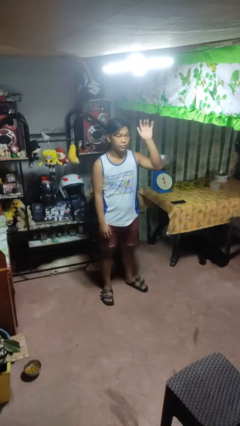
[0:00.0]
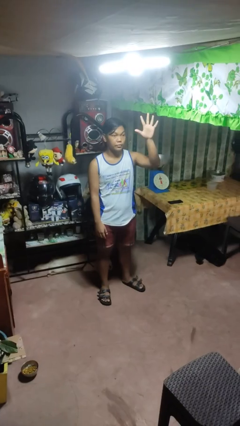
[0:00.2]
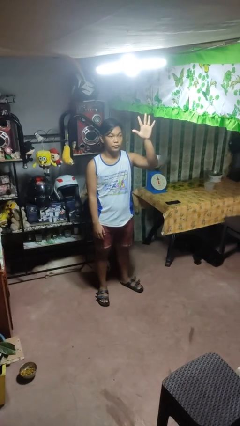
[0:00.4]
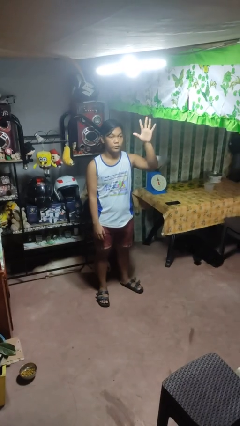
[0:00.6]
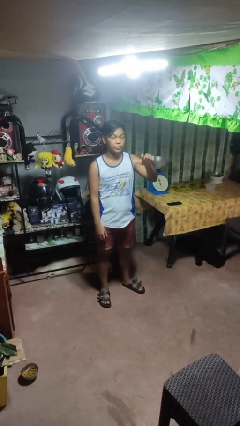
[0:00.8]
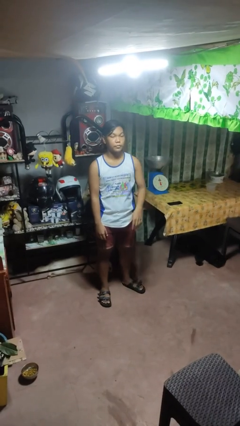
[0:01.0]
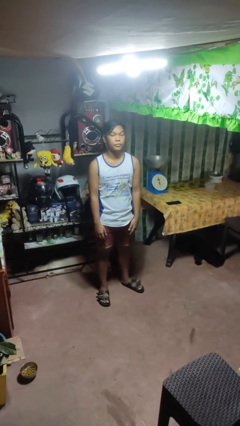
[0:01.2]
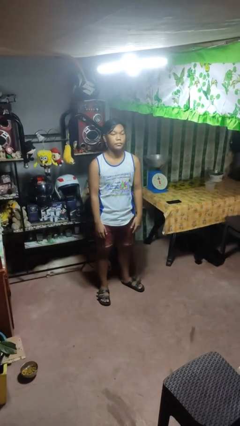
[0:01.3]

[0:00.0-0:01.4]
person gestures number five

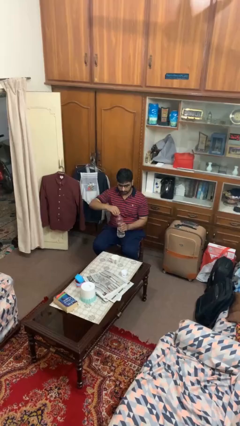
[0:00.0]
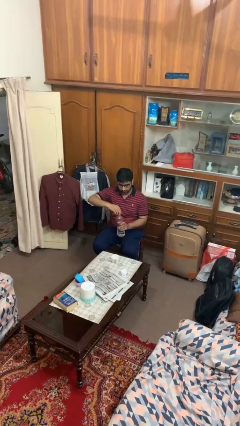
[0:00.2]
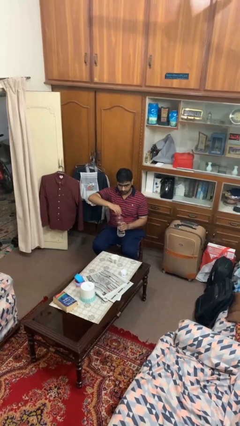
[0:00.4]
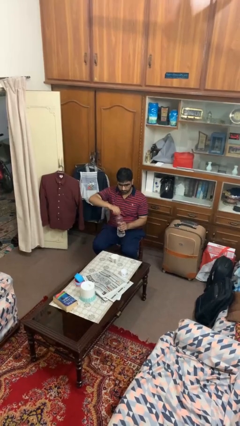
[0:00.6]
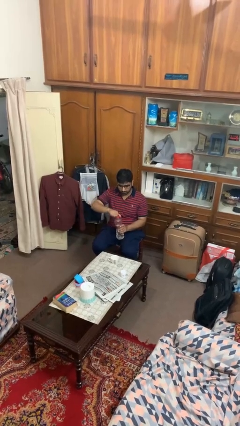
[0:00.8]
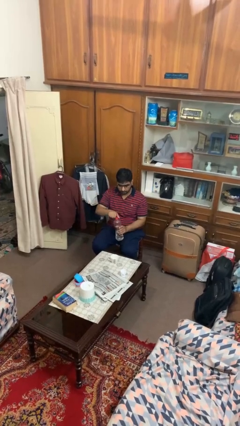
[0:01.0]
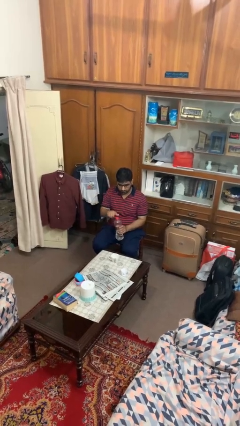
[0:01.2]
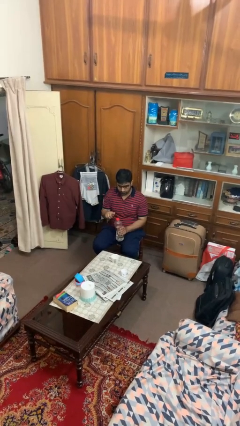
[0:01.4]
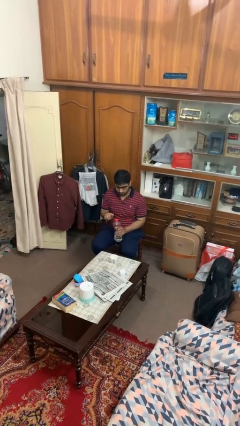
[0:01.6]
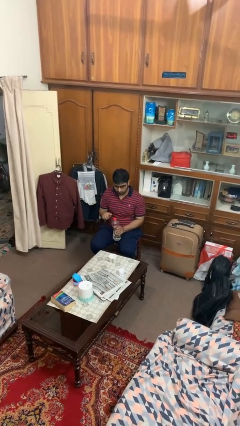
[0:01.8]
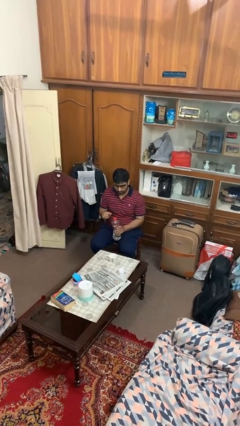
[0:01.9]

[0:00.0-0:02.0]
person screws lid to bottle

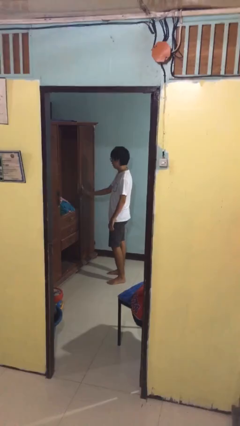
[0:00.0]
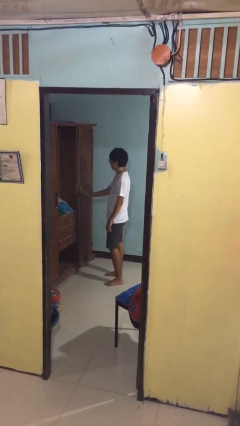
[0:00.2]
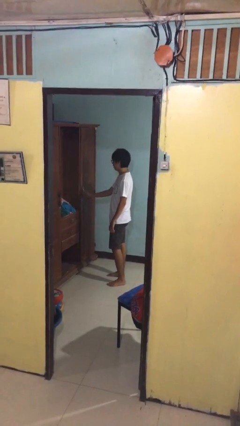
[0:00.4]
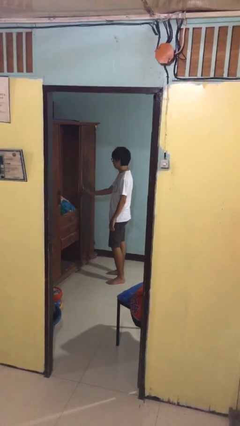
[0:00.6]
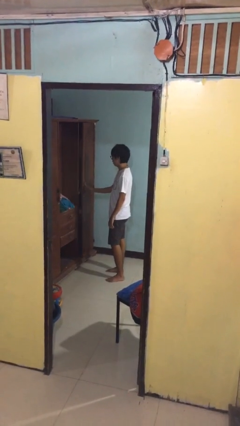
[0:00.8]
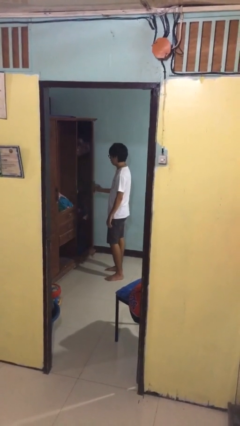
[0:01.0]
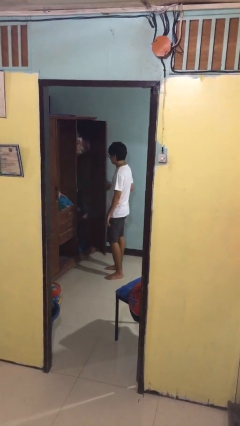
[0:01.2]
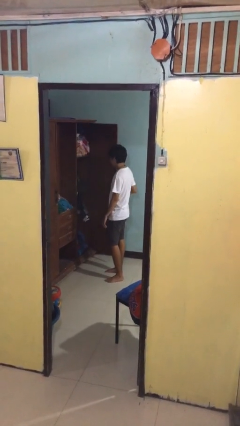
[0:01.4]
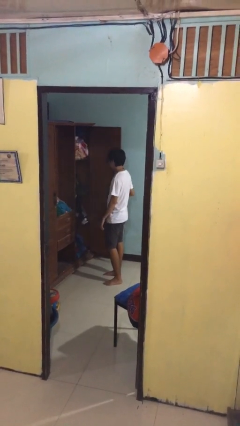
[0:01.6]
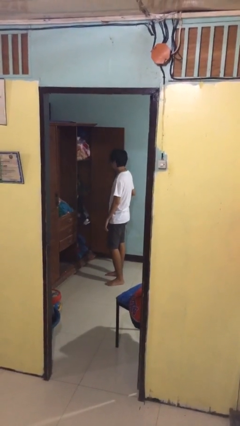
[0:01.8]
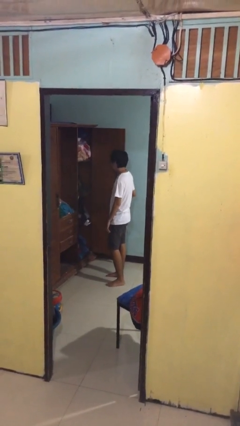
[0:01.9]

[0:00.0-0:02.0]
person opens closet door

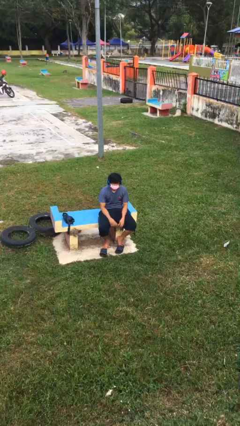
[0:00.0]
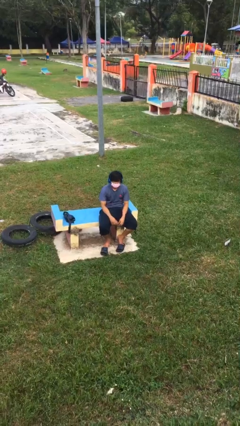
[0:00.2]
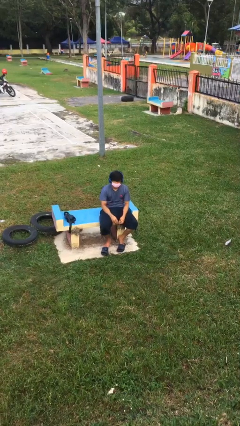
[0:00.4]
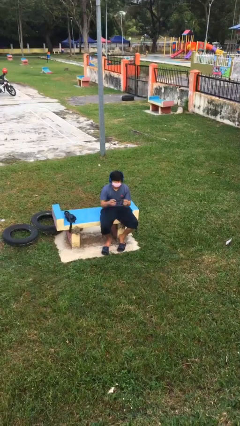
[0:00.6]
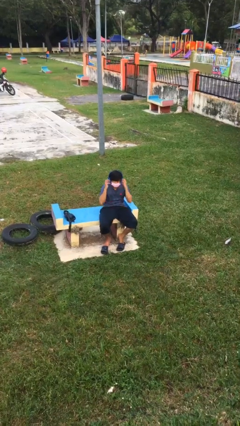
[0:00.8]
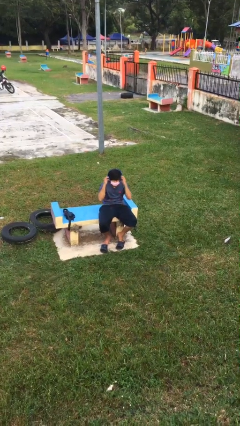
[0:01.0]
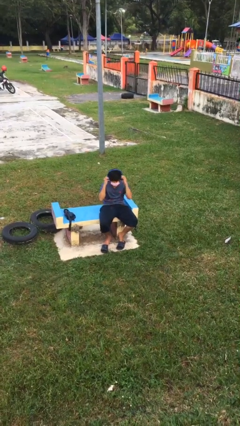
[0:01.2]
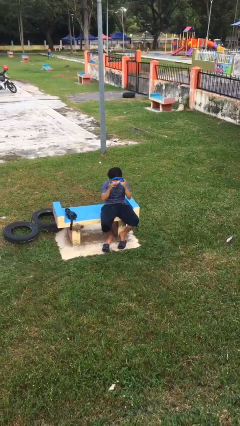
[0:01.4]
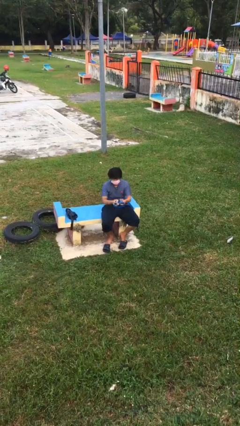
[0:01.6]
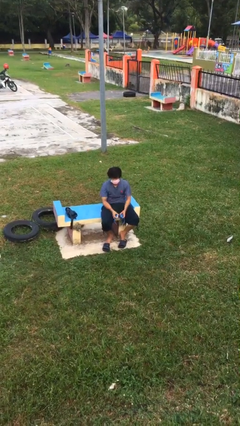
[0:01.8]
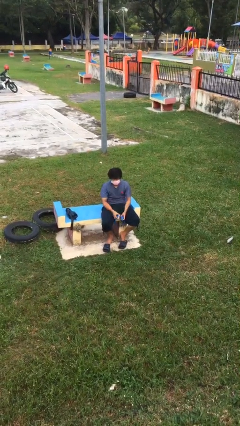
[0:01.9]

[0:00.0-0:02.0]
person takes off headphones

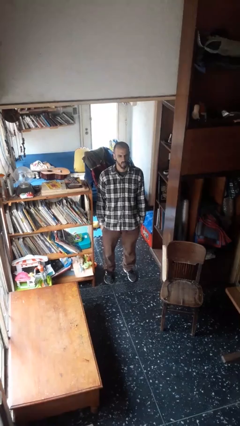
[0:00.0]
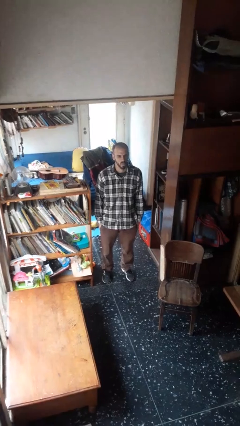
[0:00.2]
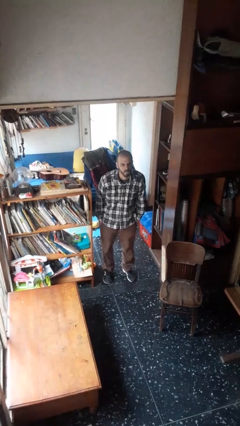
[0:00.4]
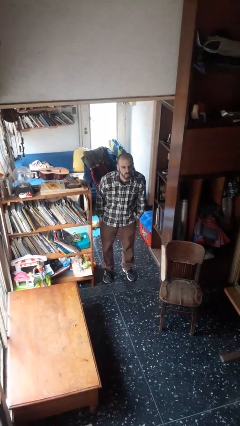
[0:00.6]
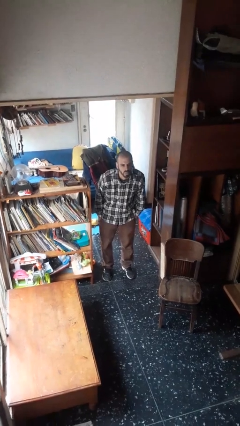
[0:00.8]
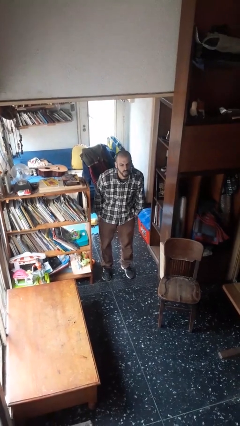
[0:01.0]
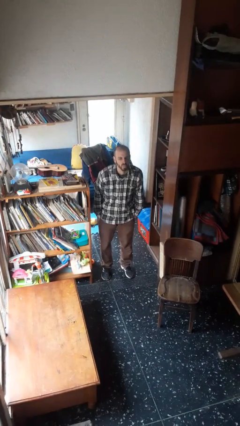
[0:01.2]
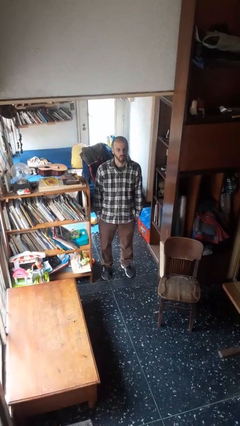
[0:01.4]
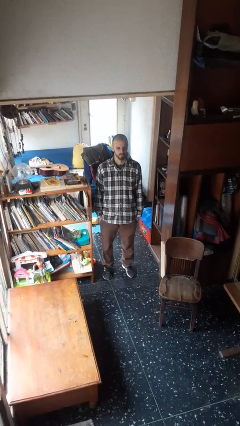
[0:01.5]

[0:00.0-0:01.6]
person sticks out tongue

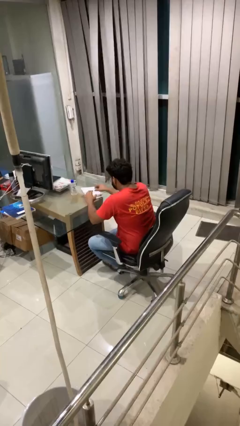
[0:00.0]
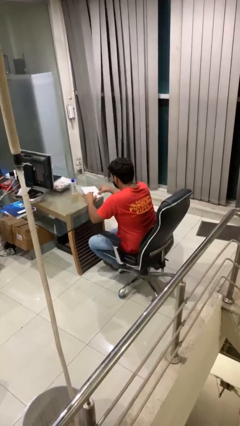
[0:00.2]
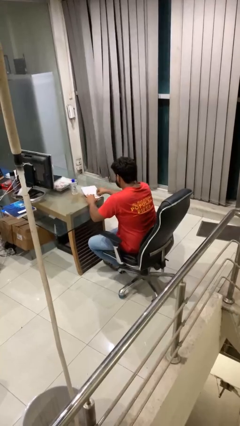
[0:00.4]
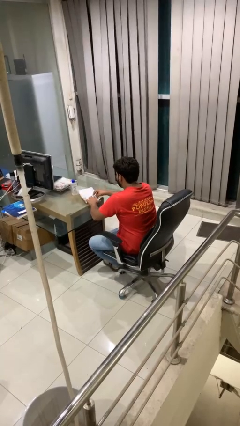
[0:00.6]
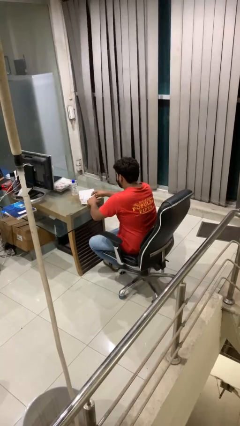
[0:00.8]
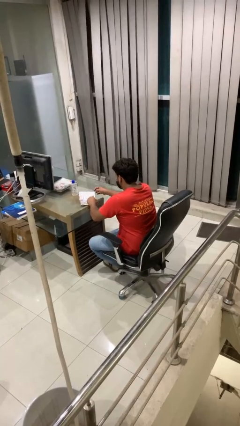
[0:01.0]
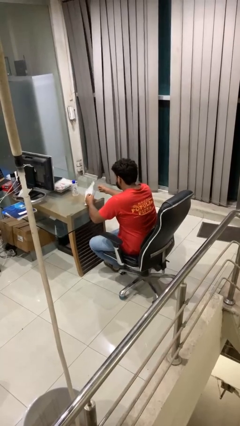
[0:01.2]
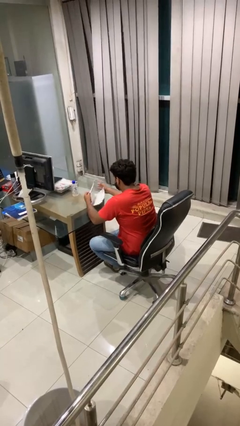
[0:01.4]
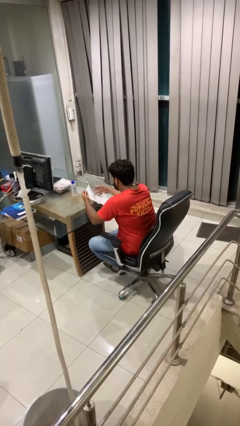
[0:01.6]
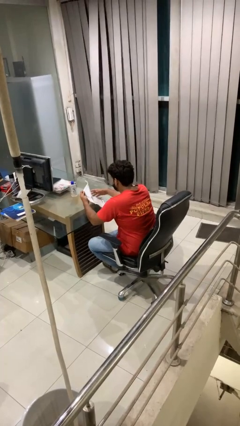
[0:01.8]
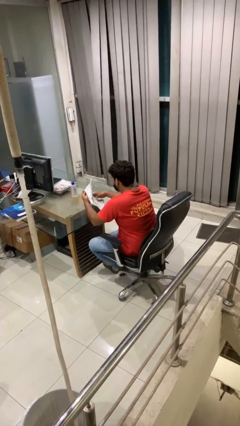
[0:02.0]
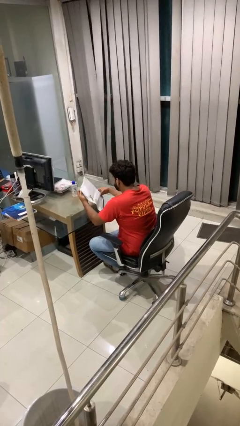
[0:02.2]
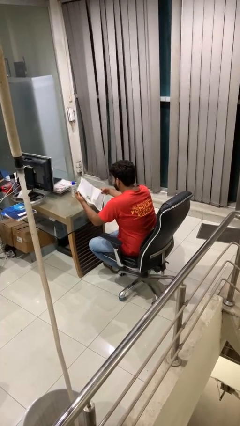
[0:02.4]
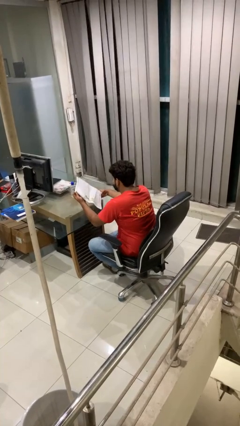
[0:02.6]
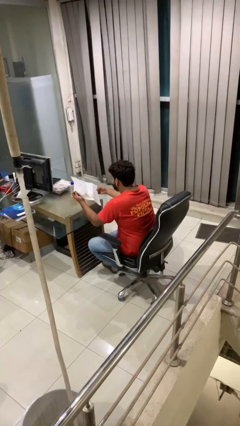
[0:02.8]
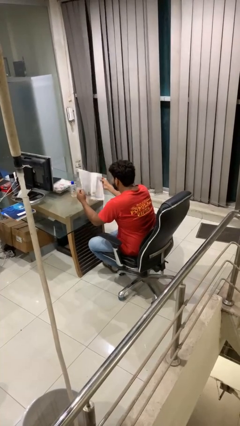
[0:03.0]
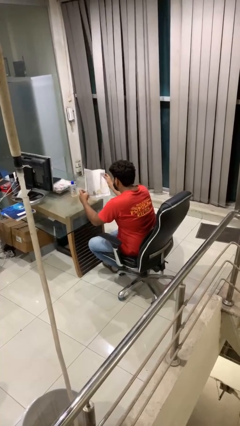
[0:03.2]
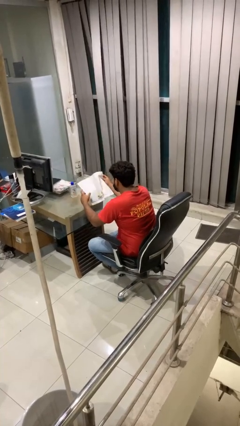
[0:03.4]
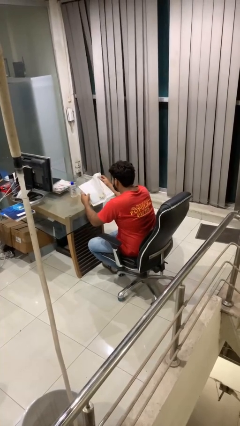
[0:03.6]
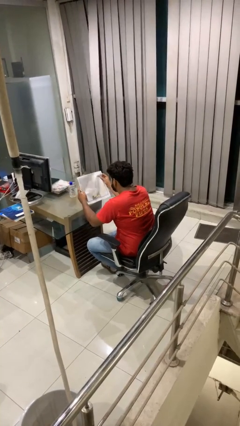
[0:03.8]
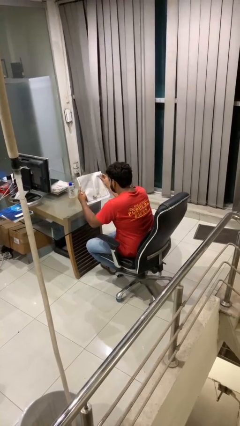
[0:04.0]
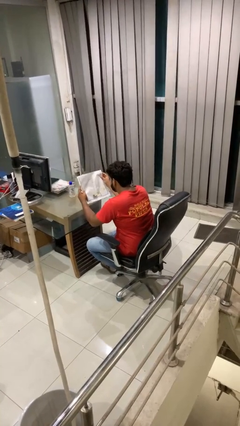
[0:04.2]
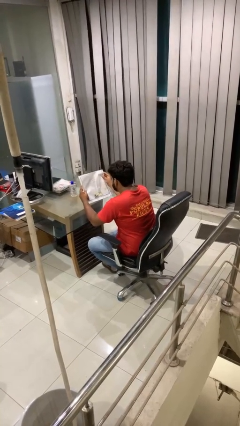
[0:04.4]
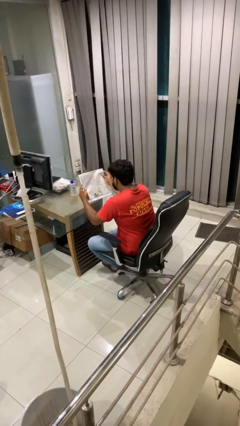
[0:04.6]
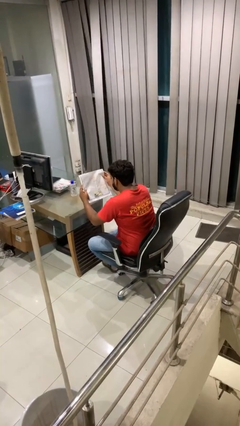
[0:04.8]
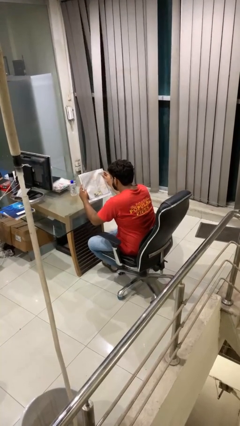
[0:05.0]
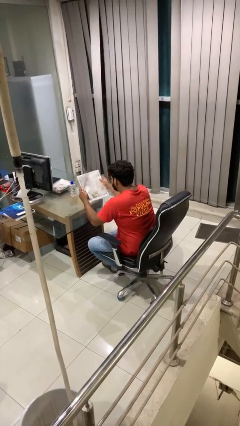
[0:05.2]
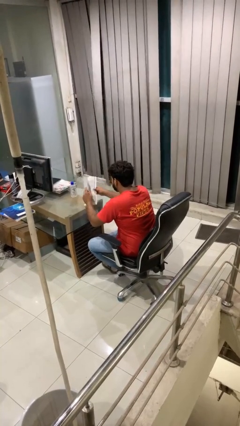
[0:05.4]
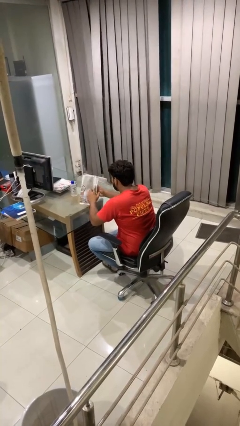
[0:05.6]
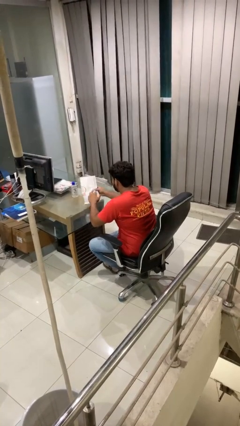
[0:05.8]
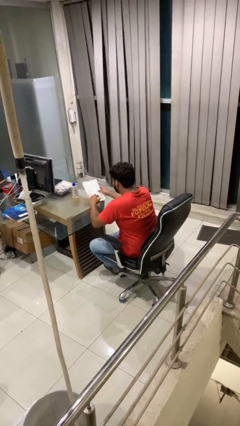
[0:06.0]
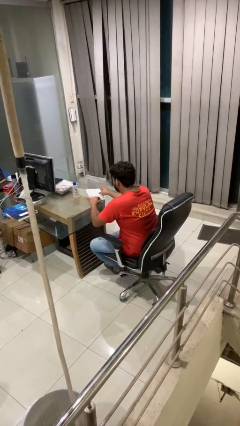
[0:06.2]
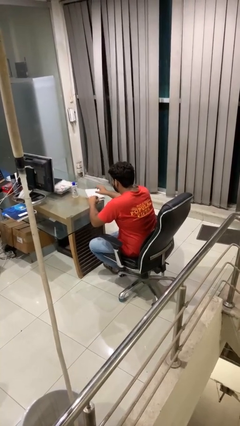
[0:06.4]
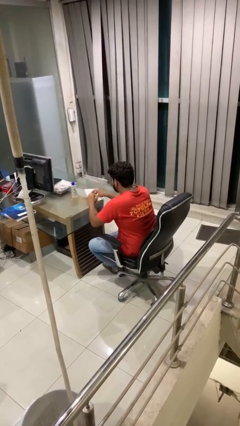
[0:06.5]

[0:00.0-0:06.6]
person reads newspaper

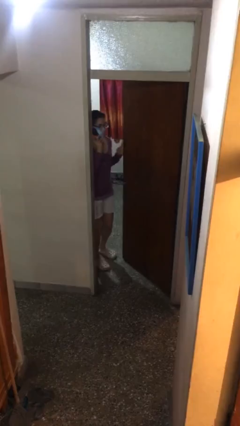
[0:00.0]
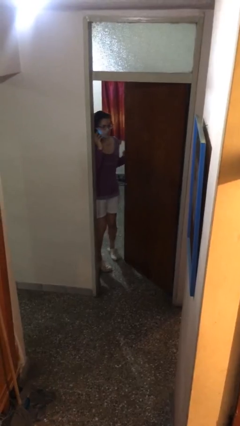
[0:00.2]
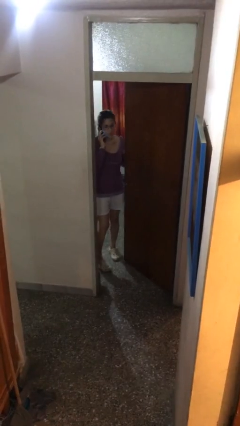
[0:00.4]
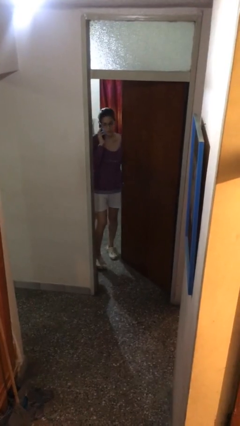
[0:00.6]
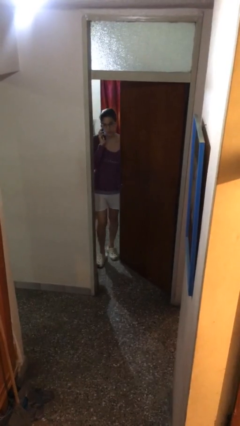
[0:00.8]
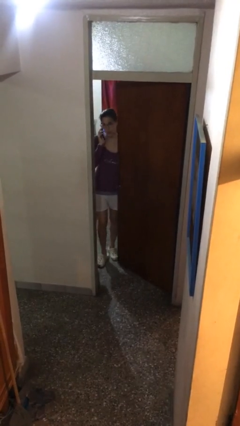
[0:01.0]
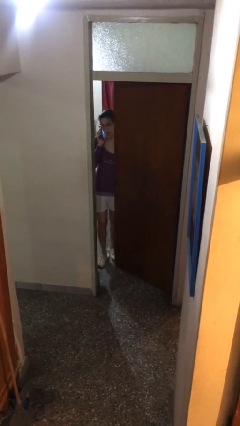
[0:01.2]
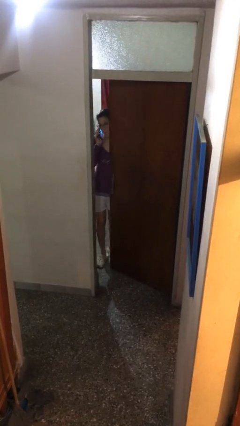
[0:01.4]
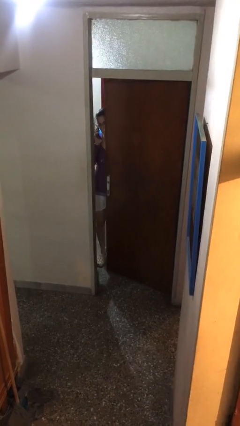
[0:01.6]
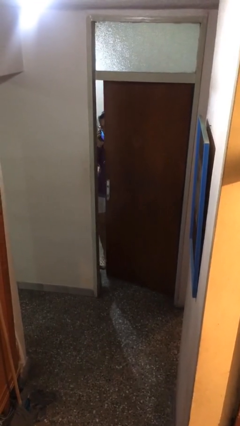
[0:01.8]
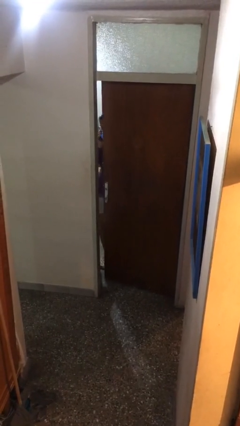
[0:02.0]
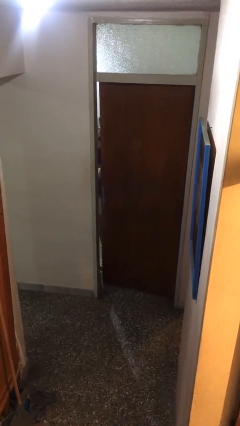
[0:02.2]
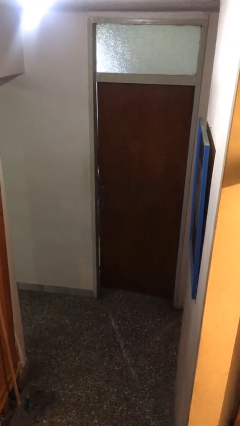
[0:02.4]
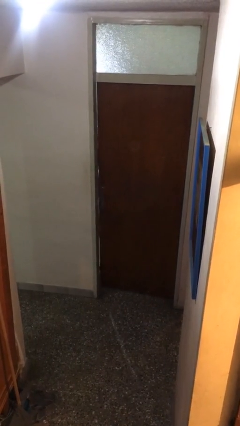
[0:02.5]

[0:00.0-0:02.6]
person closes facility door
